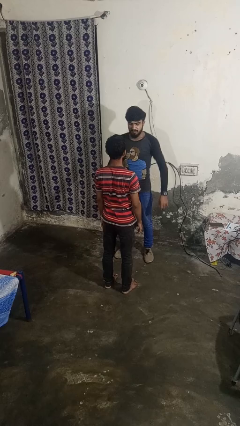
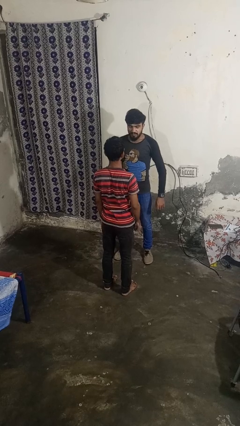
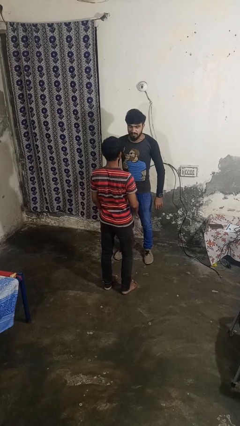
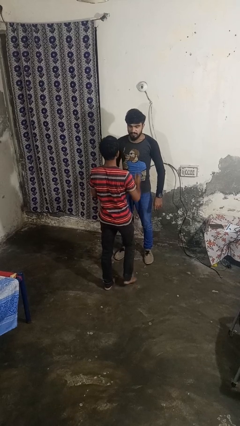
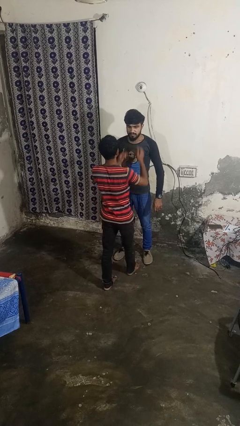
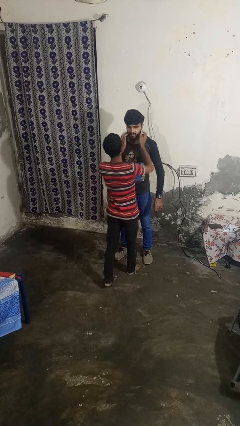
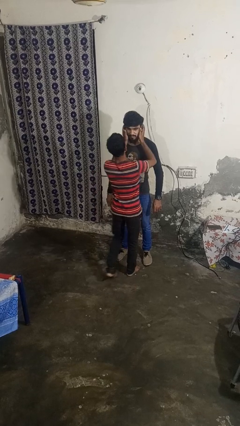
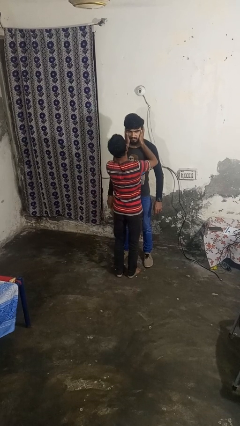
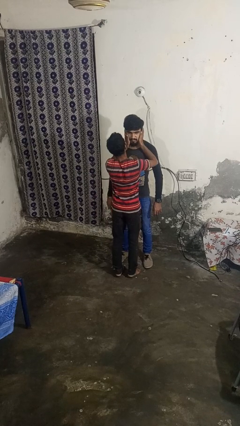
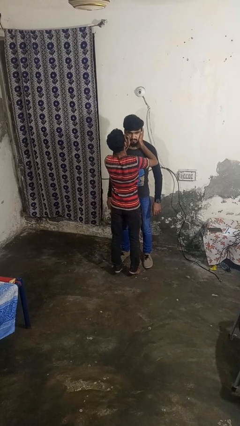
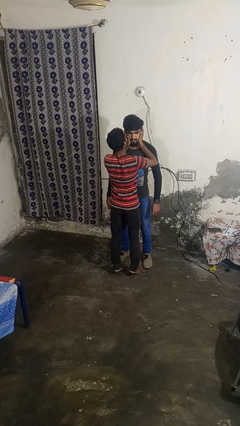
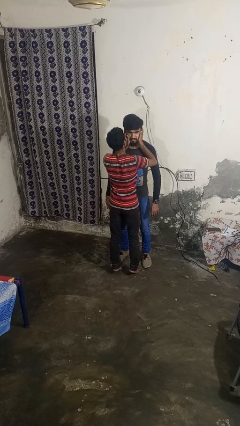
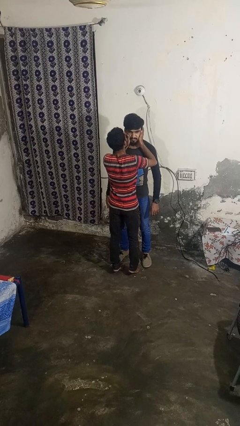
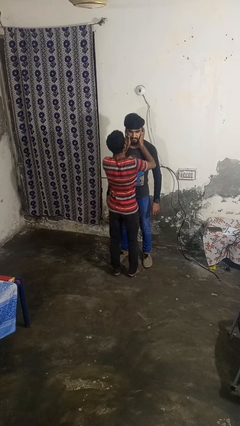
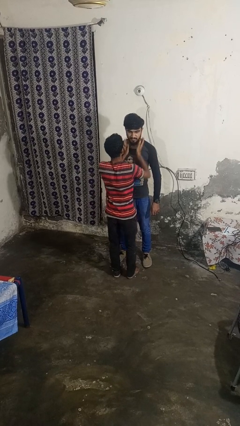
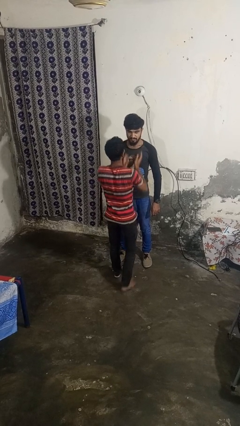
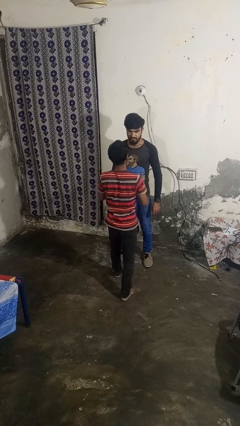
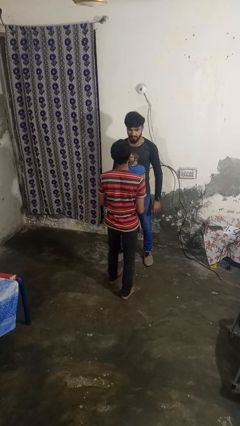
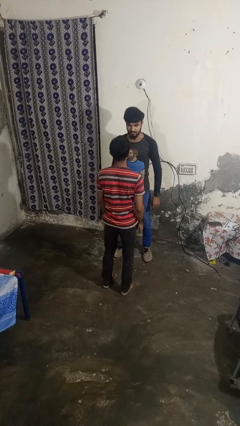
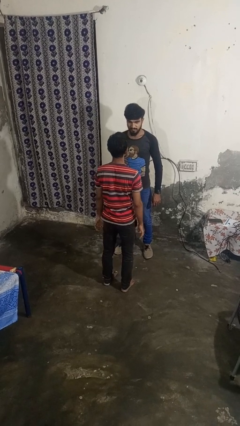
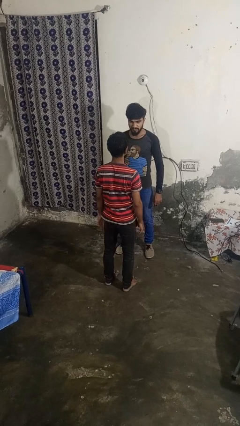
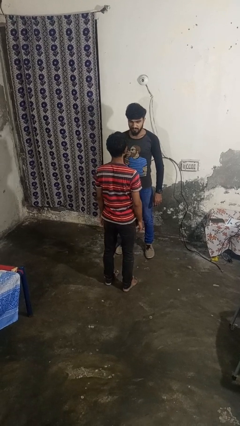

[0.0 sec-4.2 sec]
person kisses cheek of person

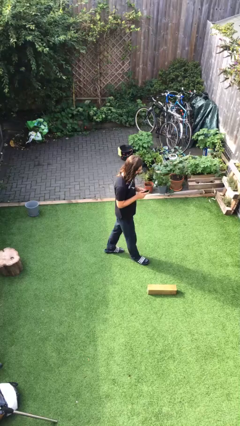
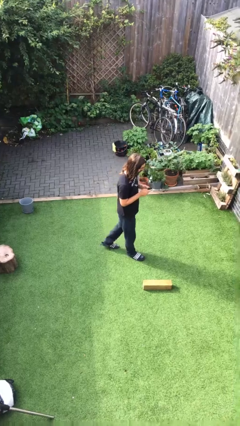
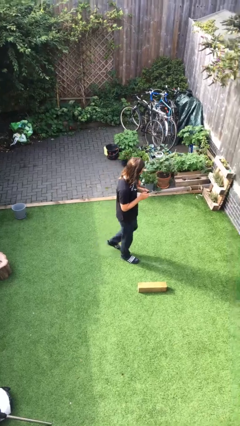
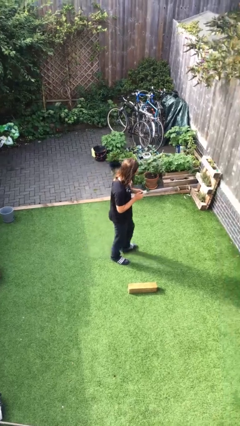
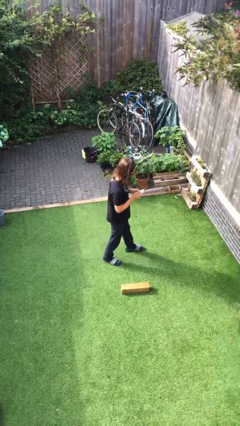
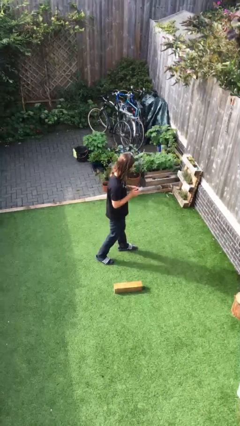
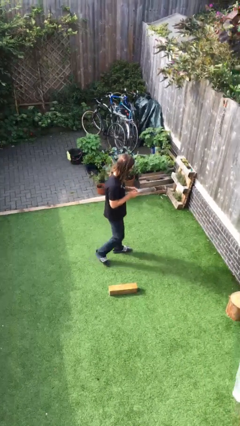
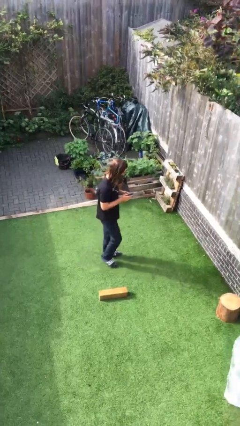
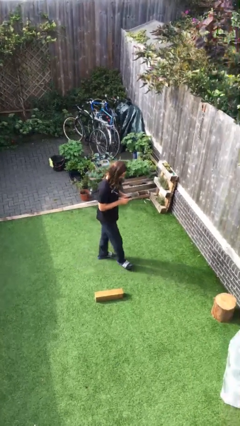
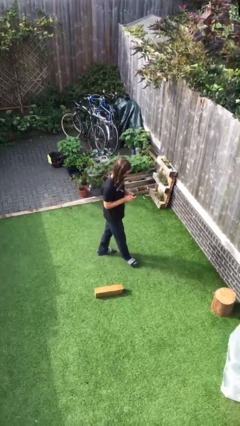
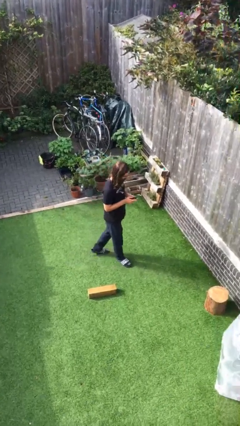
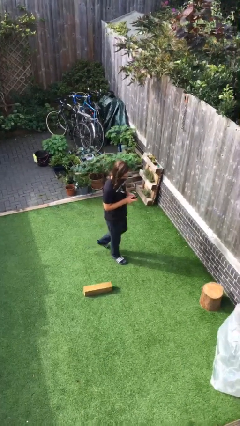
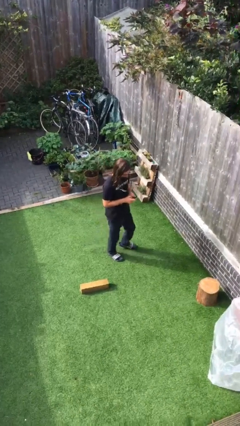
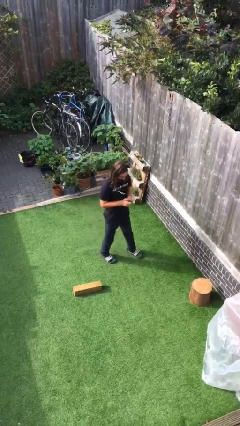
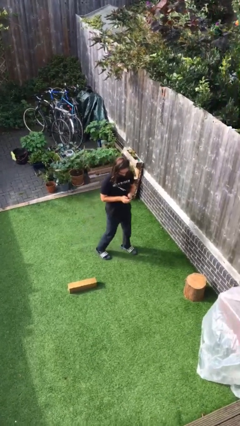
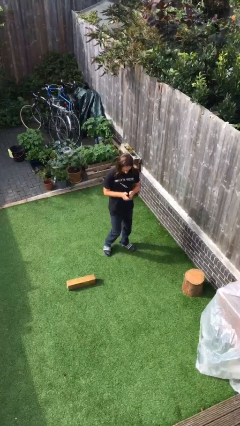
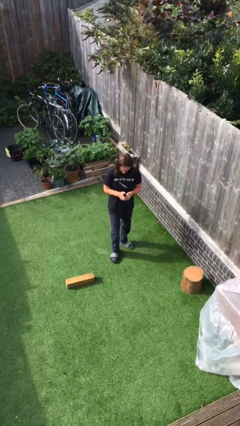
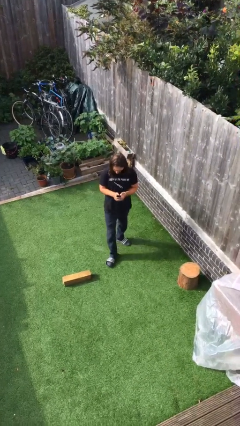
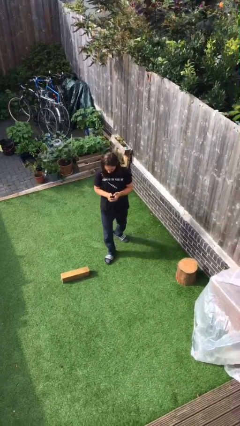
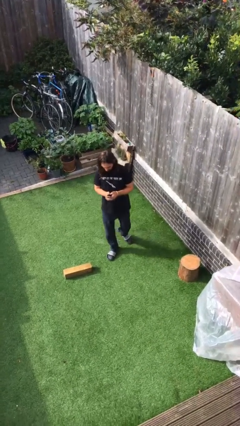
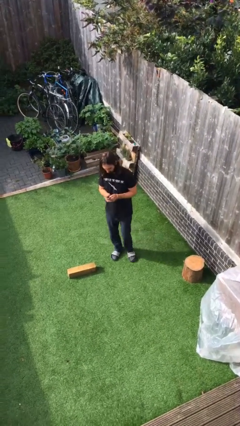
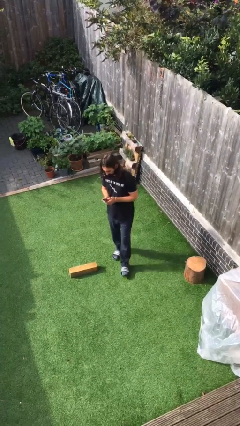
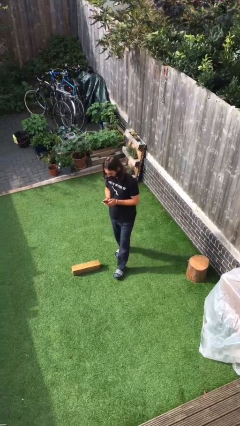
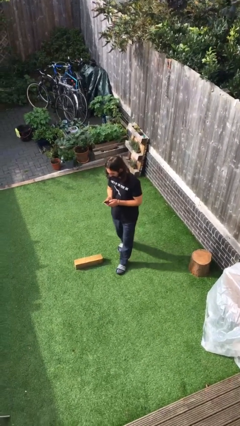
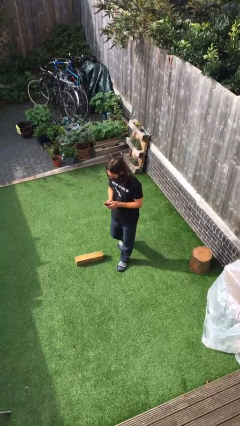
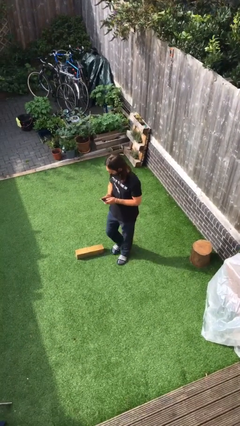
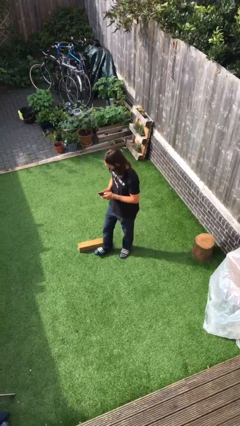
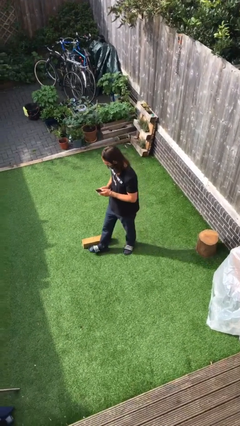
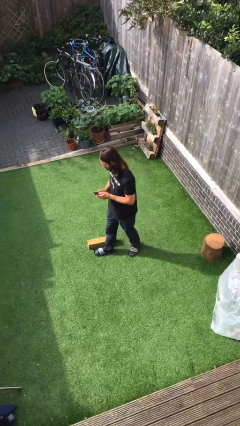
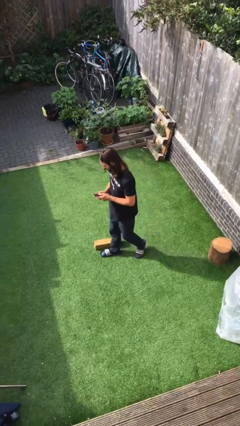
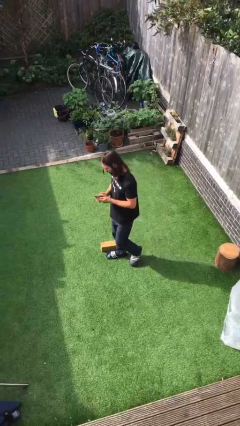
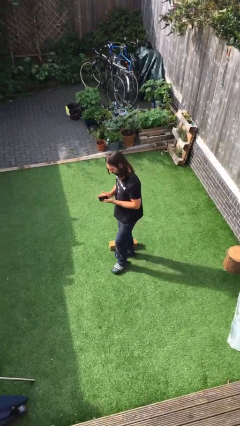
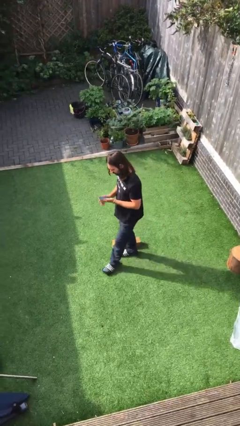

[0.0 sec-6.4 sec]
person texts on phone

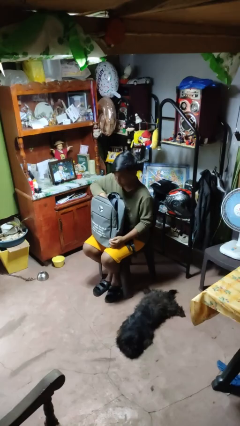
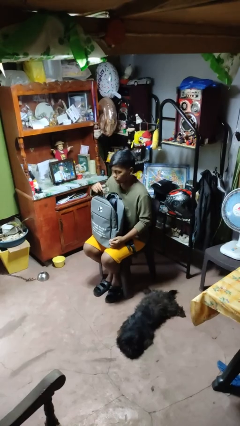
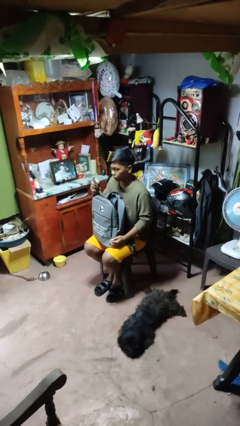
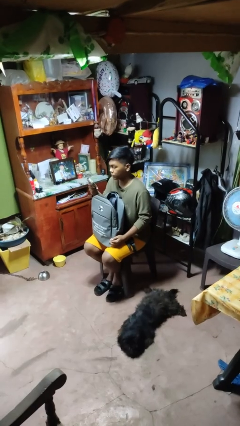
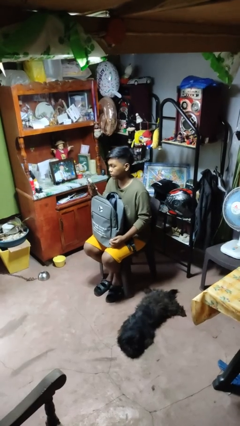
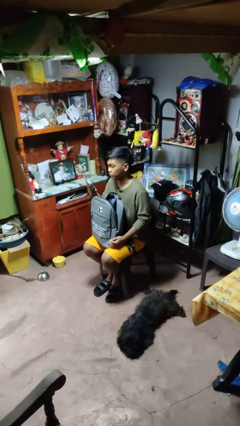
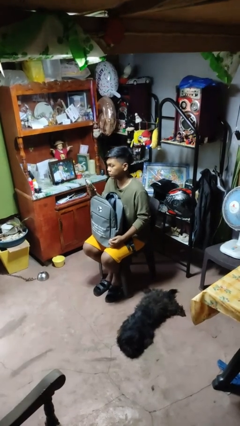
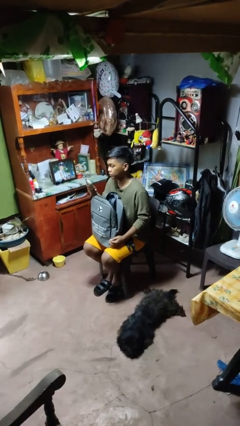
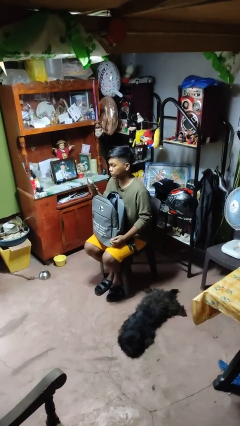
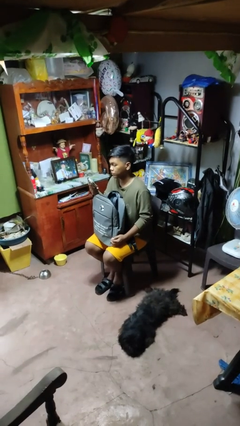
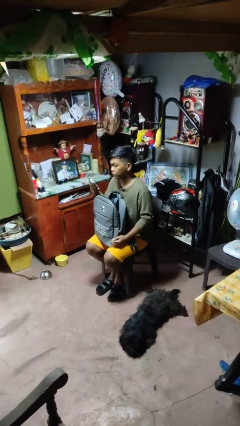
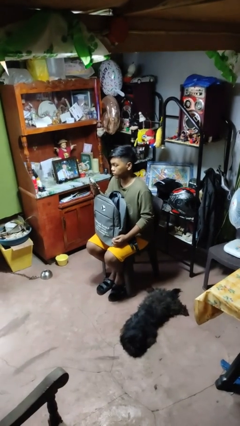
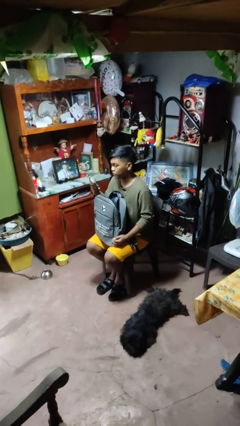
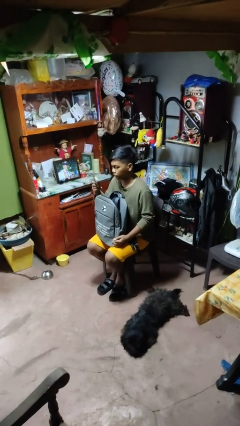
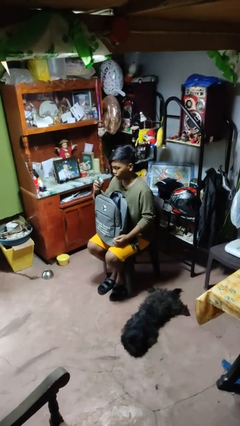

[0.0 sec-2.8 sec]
person takes object from backpack

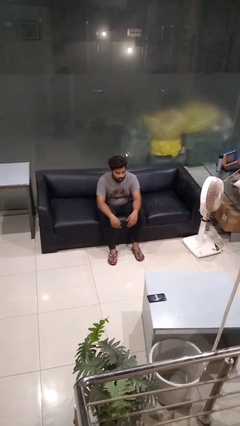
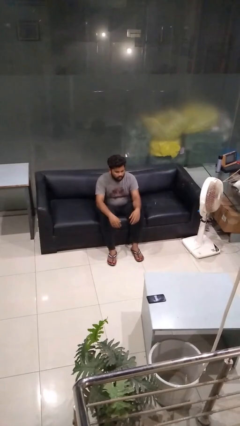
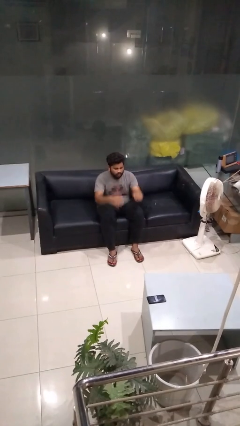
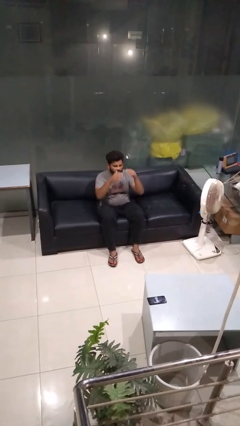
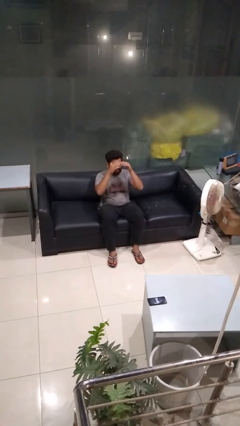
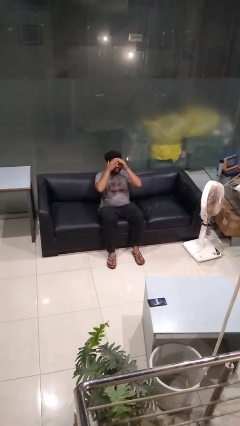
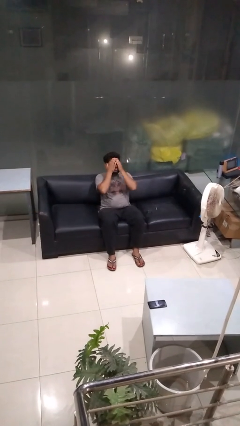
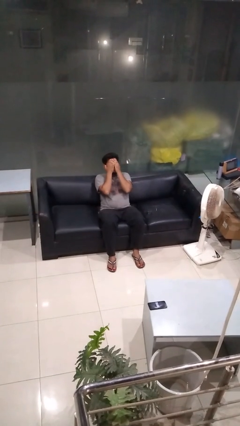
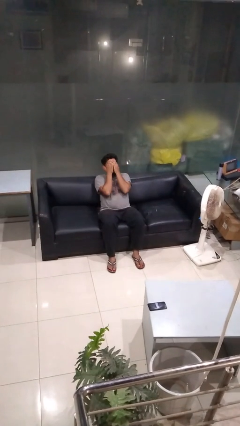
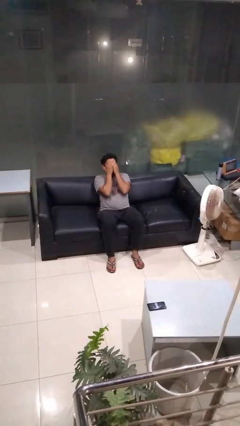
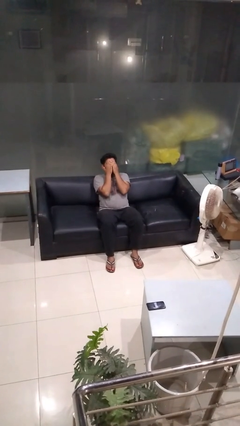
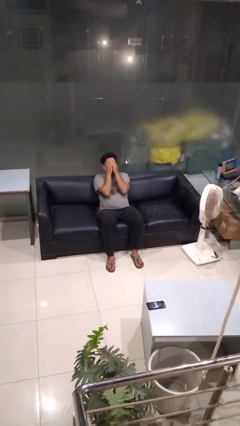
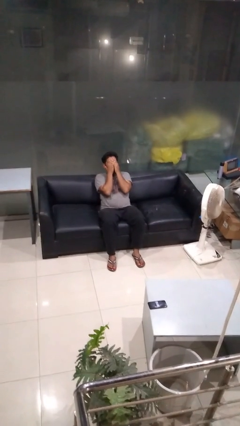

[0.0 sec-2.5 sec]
person covers face with hands

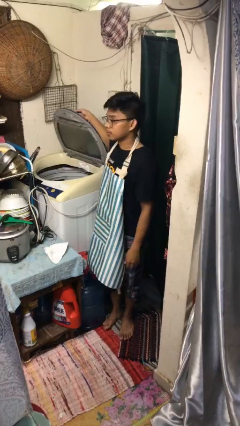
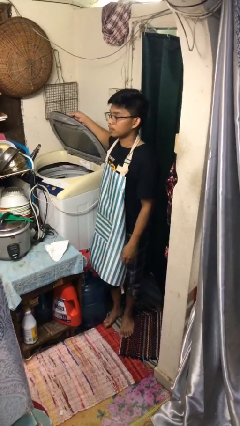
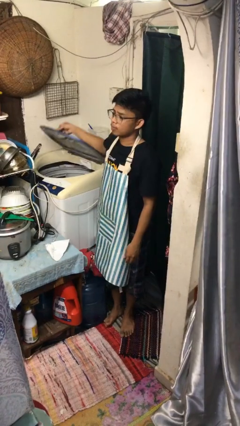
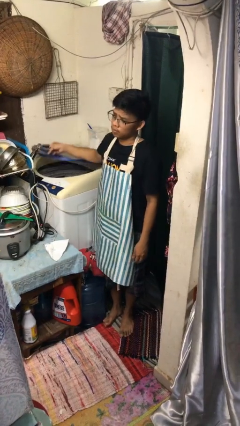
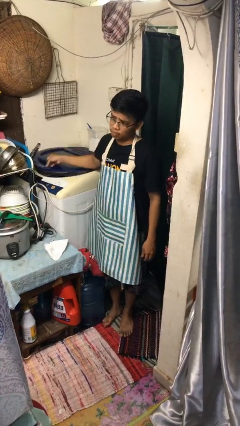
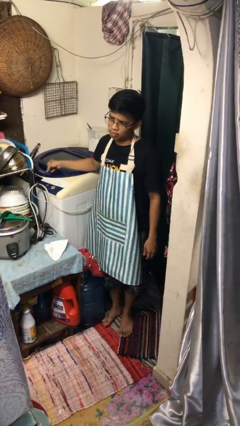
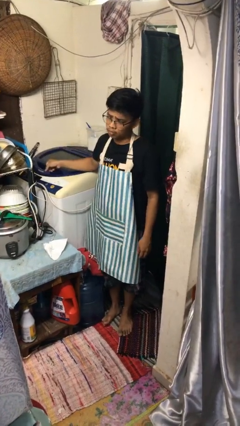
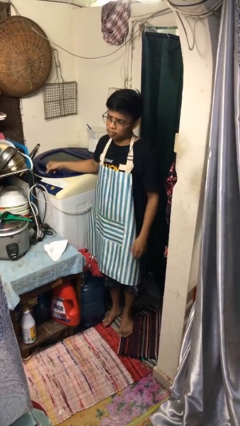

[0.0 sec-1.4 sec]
person closes clothes washer

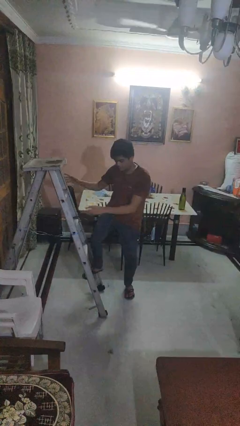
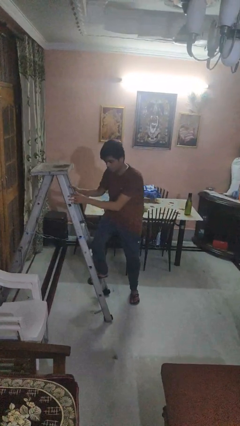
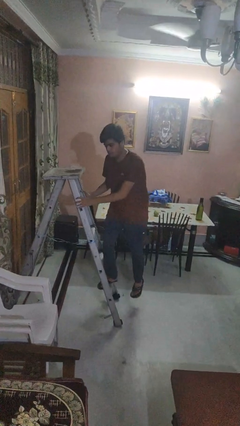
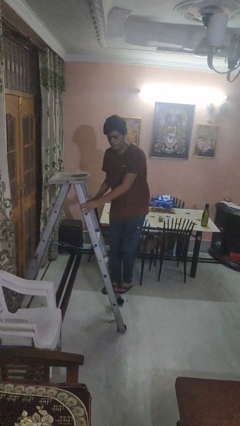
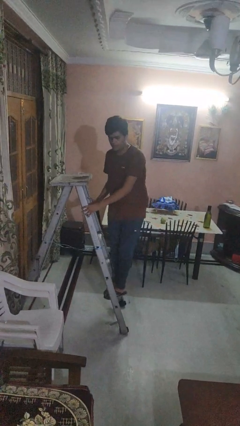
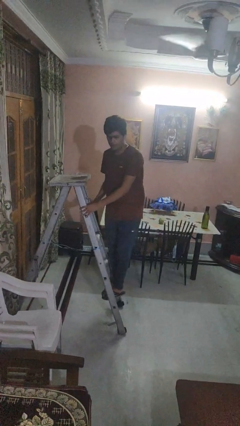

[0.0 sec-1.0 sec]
person climbs up ladder
